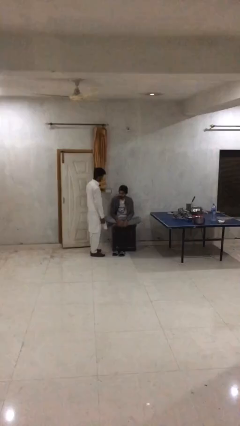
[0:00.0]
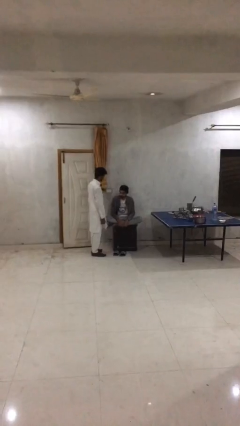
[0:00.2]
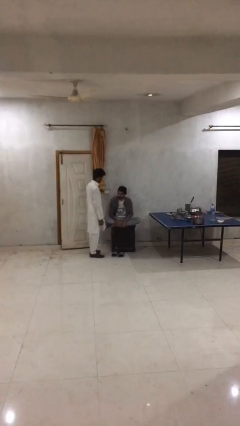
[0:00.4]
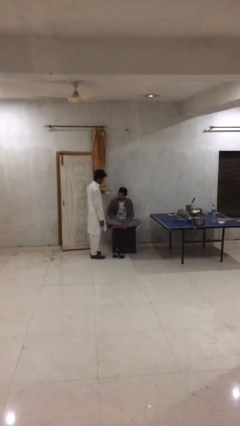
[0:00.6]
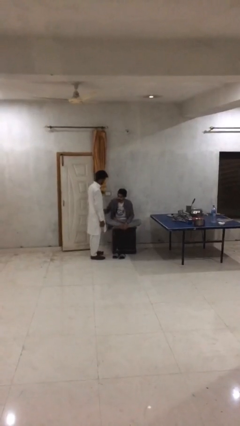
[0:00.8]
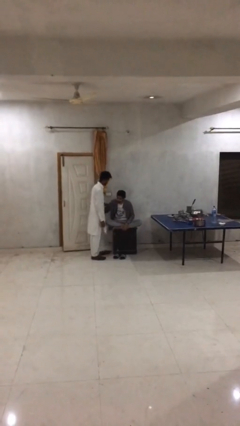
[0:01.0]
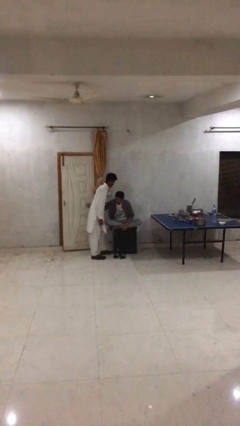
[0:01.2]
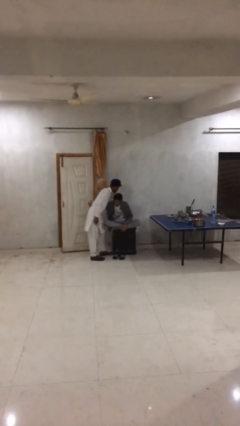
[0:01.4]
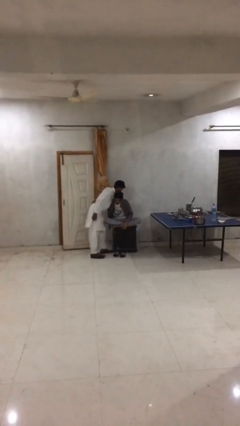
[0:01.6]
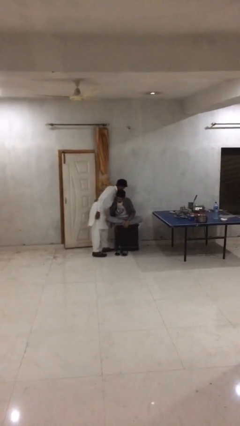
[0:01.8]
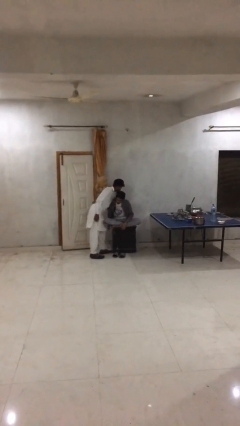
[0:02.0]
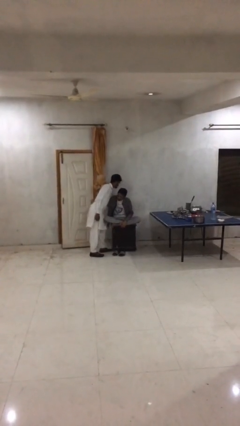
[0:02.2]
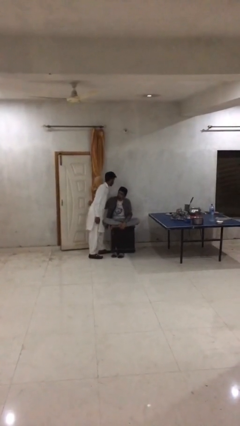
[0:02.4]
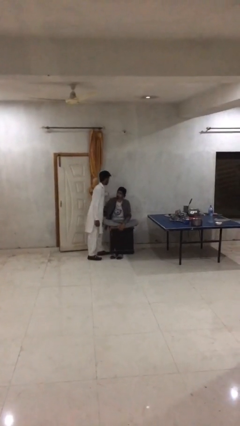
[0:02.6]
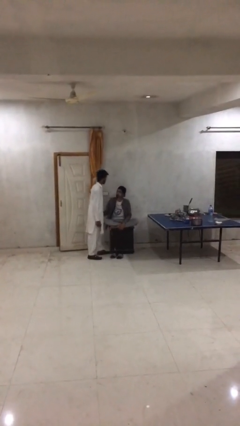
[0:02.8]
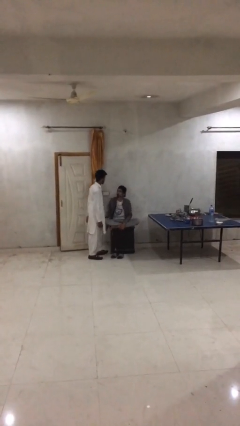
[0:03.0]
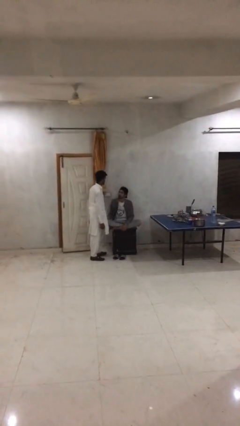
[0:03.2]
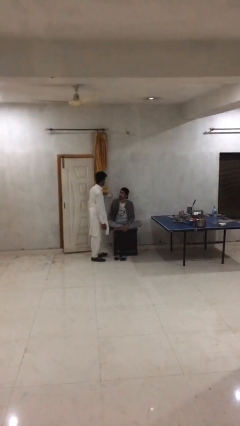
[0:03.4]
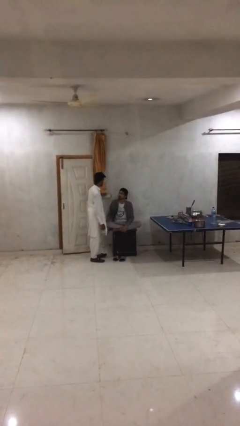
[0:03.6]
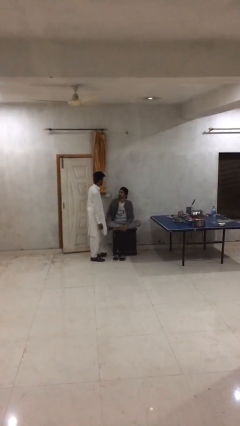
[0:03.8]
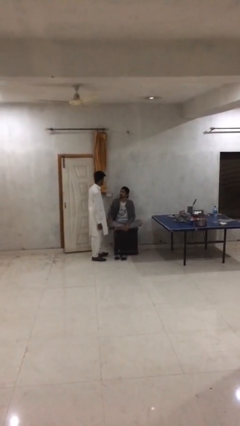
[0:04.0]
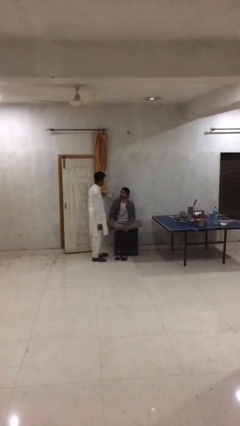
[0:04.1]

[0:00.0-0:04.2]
person embraces person

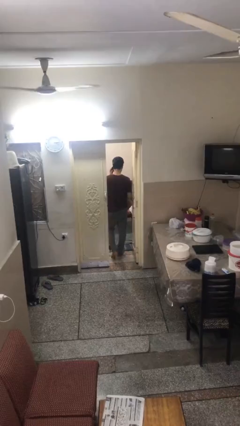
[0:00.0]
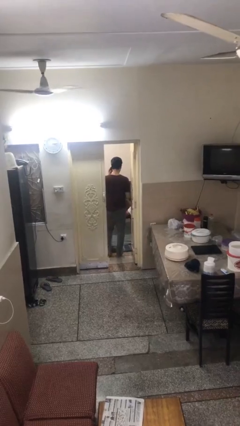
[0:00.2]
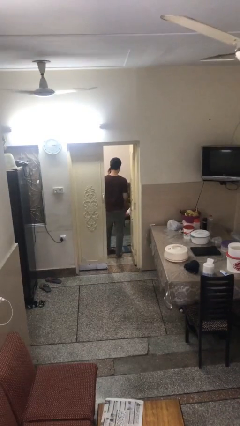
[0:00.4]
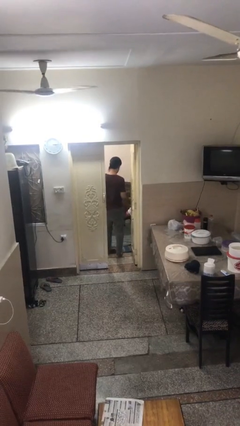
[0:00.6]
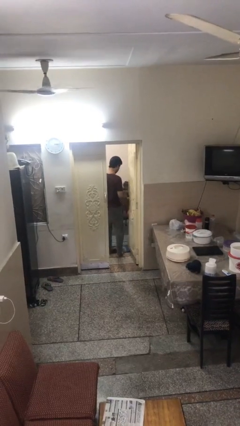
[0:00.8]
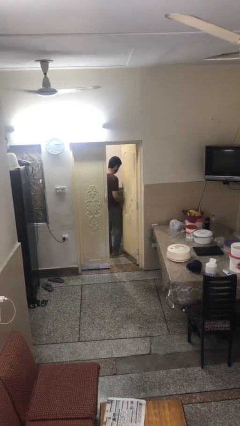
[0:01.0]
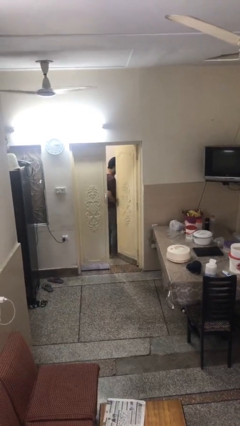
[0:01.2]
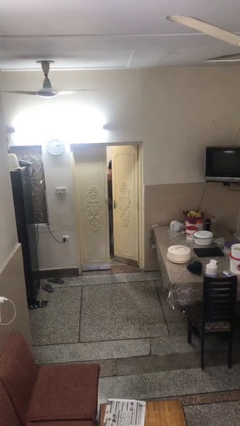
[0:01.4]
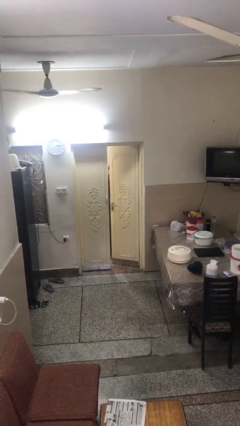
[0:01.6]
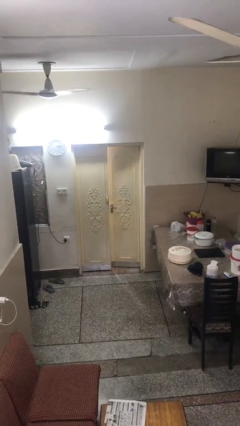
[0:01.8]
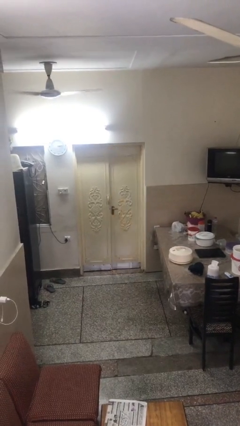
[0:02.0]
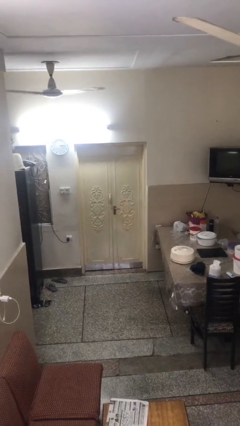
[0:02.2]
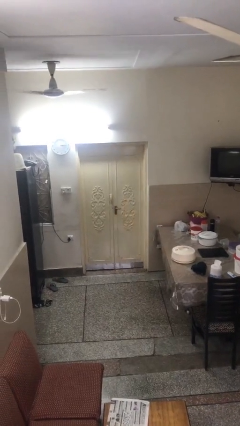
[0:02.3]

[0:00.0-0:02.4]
person closes facility door

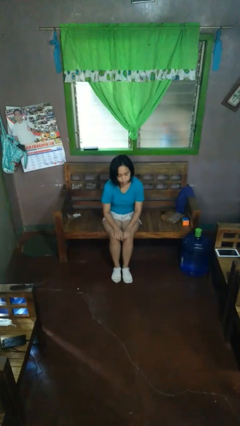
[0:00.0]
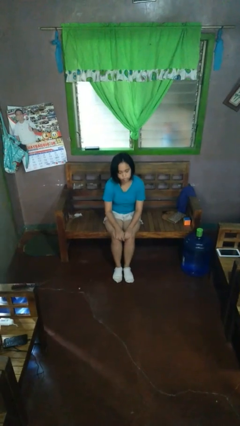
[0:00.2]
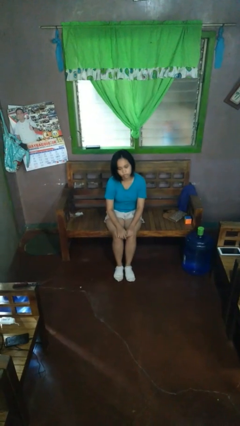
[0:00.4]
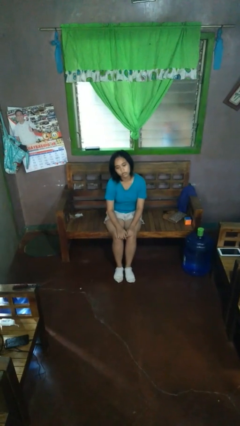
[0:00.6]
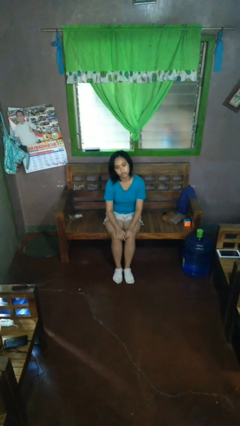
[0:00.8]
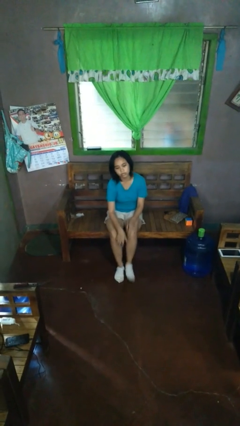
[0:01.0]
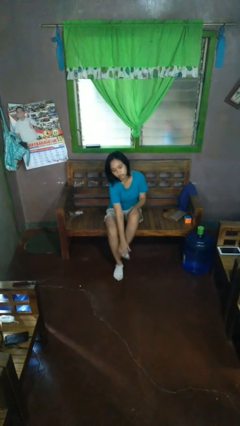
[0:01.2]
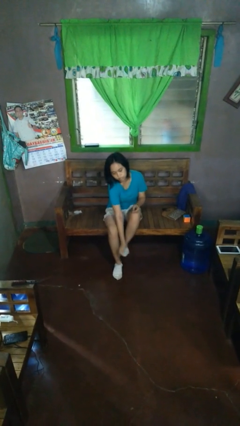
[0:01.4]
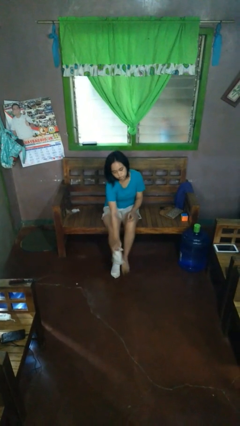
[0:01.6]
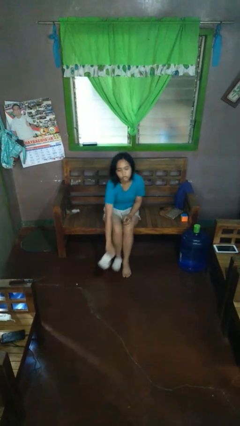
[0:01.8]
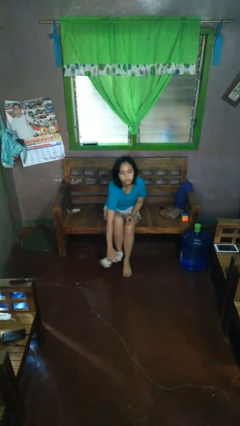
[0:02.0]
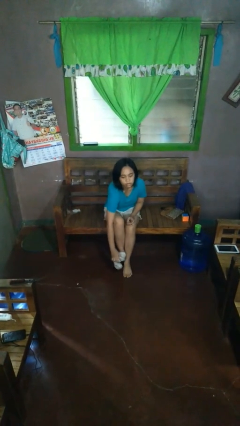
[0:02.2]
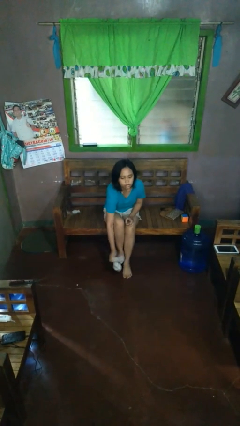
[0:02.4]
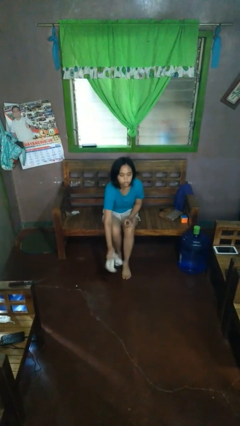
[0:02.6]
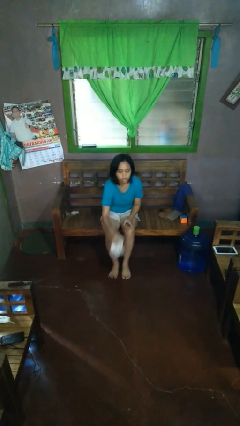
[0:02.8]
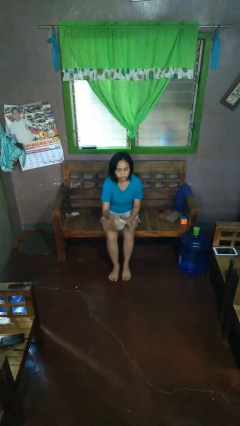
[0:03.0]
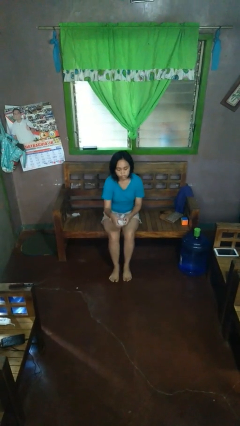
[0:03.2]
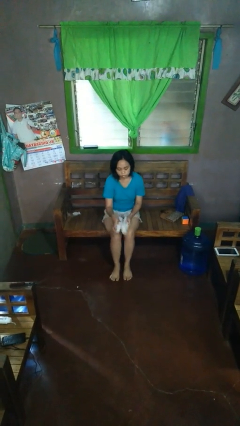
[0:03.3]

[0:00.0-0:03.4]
person takes off socks

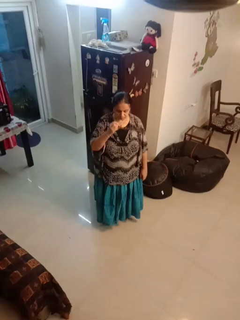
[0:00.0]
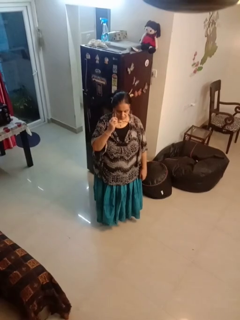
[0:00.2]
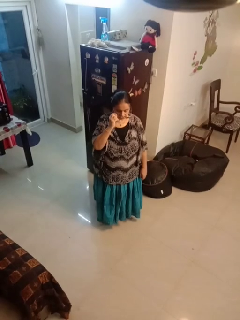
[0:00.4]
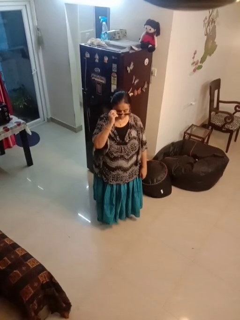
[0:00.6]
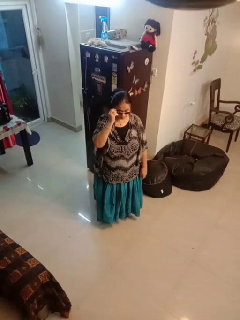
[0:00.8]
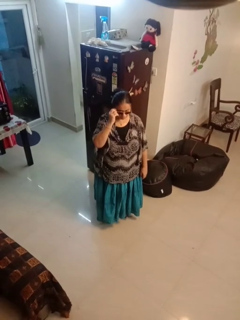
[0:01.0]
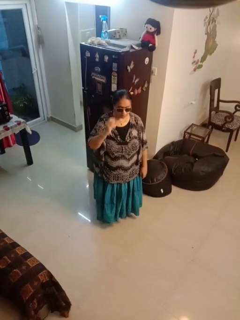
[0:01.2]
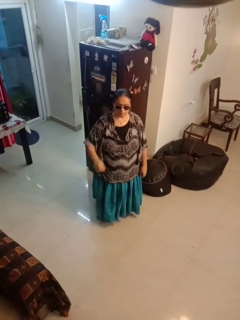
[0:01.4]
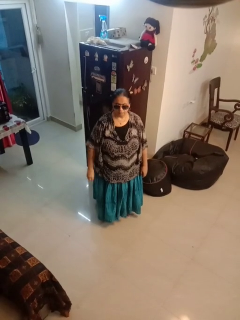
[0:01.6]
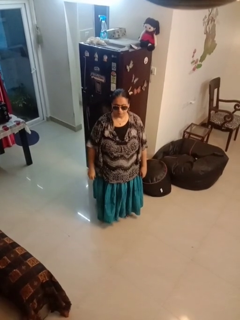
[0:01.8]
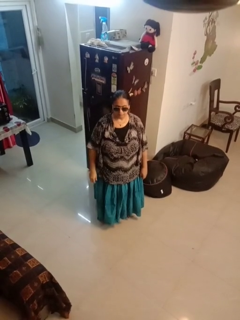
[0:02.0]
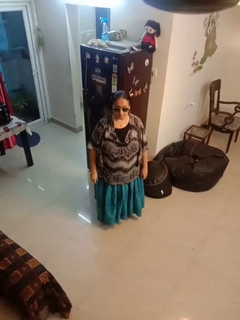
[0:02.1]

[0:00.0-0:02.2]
person puts on sunglasses

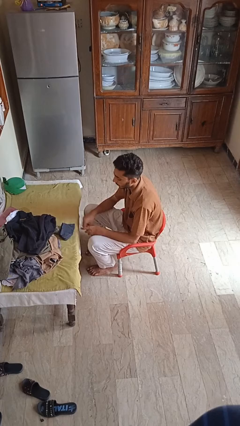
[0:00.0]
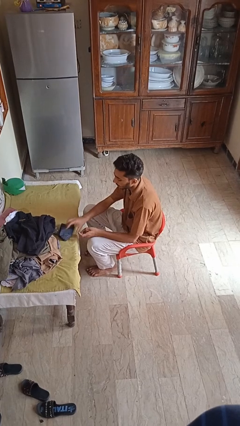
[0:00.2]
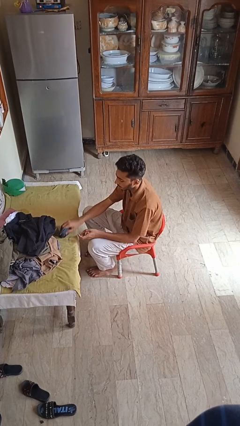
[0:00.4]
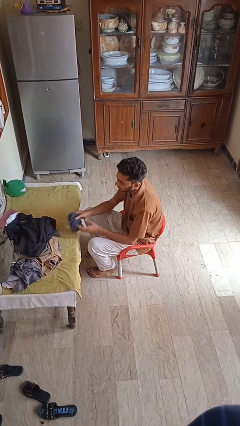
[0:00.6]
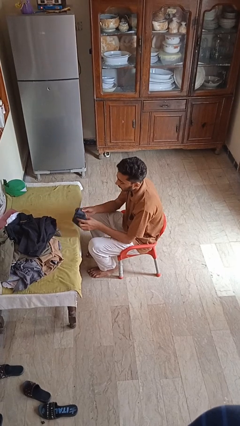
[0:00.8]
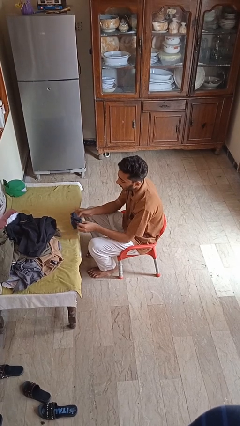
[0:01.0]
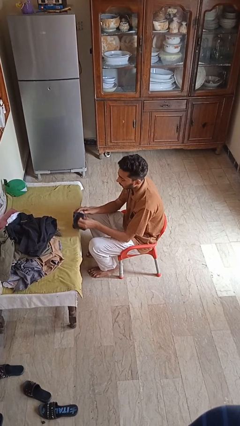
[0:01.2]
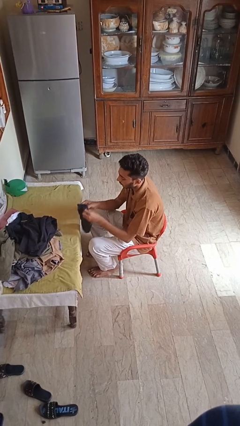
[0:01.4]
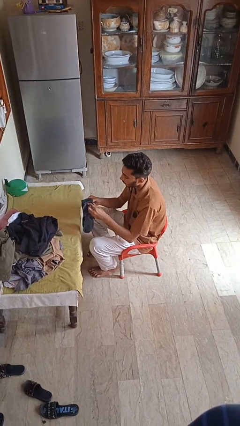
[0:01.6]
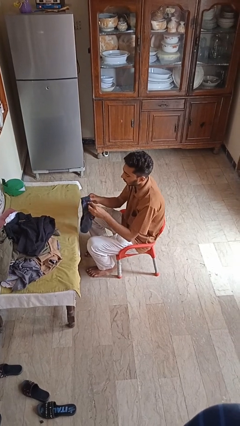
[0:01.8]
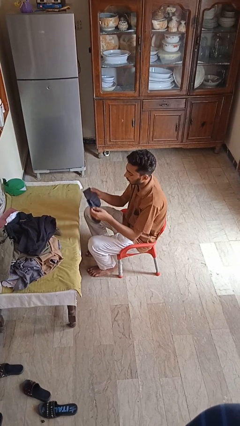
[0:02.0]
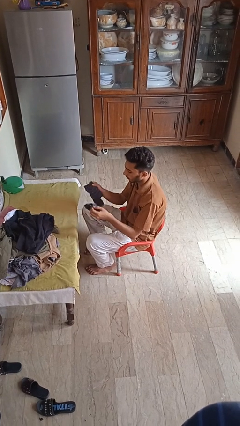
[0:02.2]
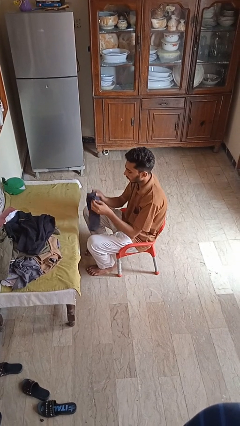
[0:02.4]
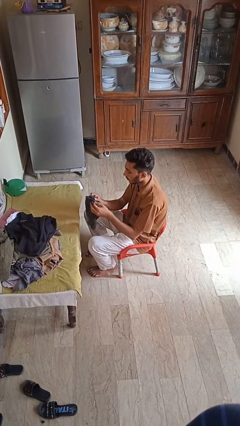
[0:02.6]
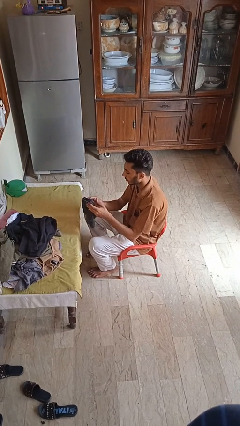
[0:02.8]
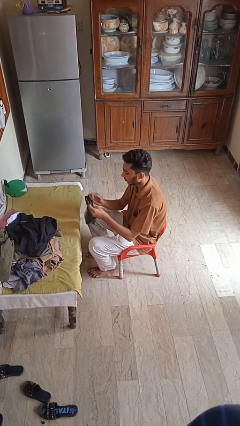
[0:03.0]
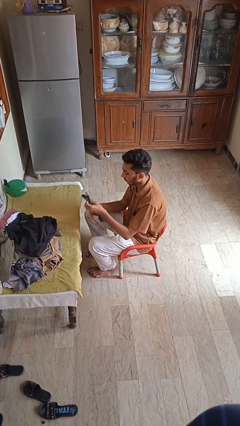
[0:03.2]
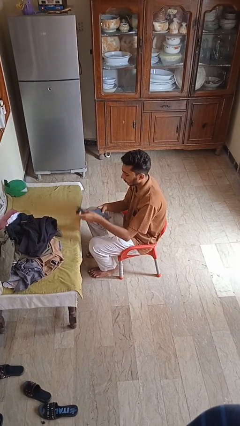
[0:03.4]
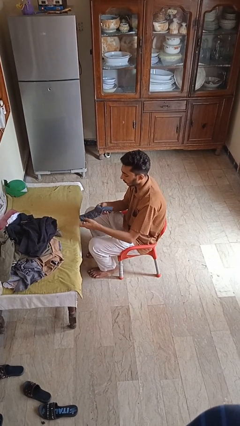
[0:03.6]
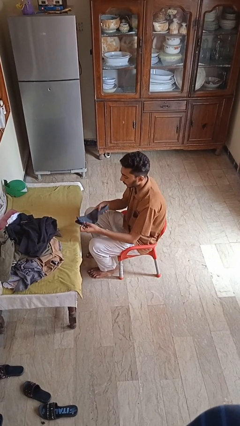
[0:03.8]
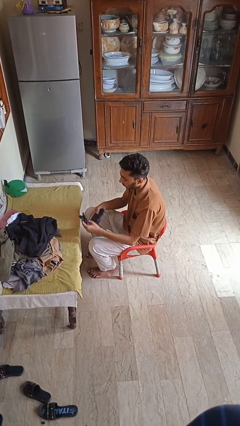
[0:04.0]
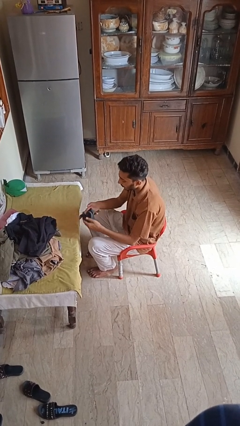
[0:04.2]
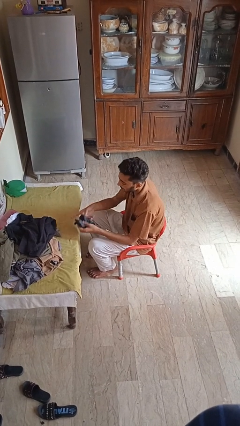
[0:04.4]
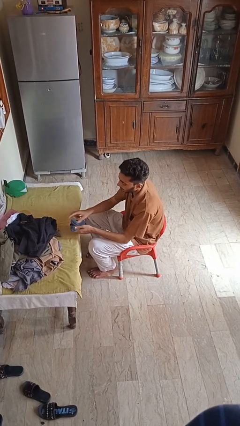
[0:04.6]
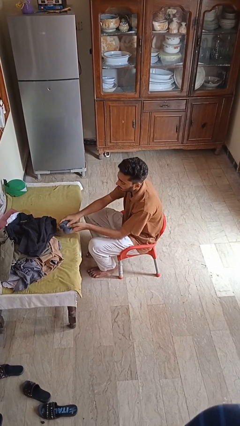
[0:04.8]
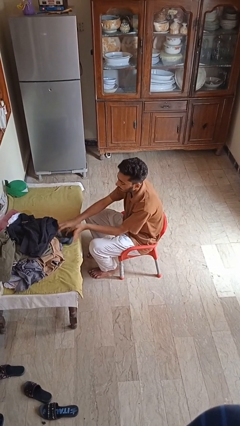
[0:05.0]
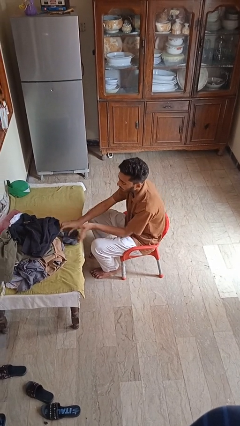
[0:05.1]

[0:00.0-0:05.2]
person folds socks

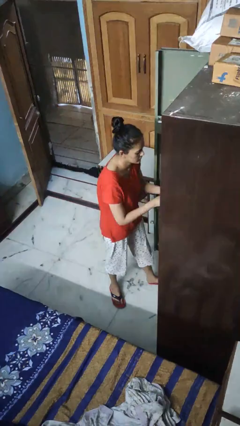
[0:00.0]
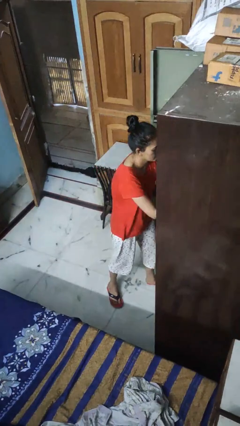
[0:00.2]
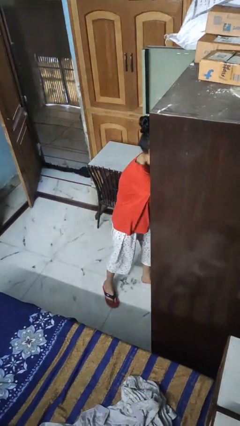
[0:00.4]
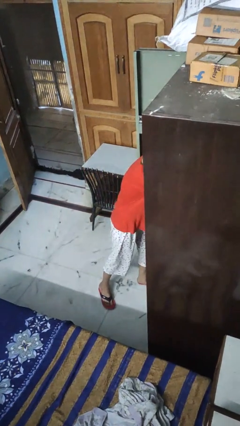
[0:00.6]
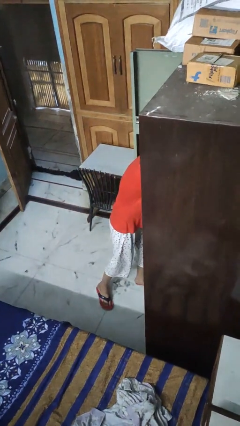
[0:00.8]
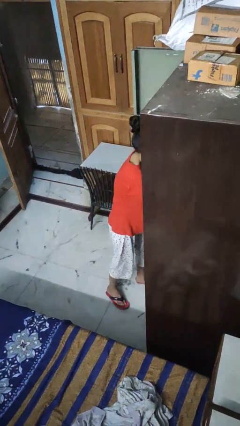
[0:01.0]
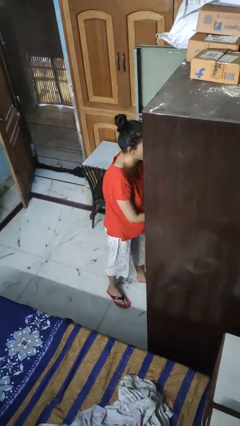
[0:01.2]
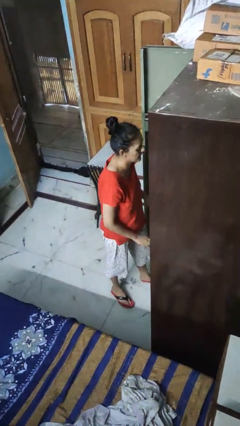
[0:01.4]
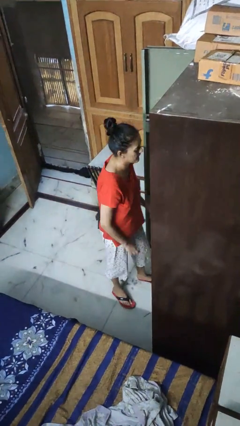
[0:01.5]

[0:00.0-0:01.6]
person puts clothes into dresser
